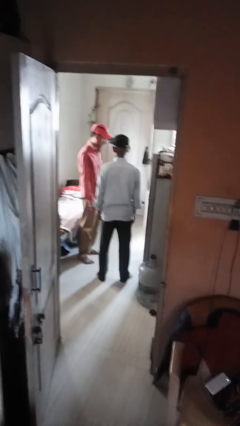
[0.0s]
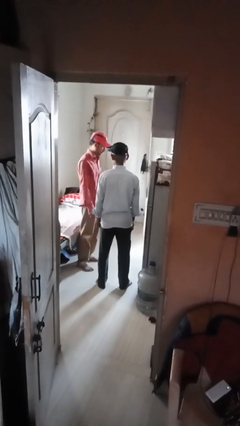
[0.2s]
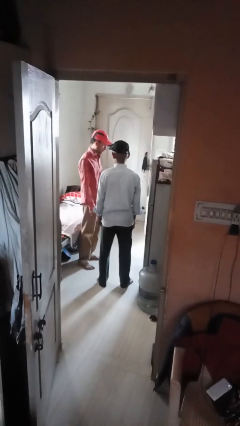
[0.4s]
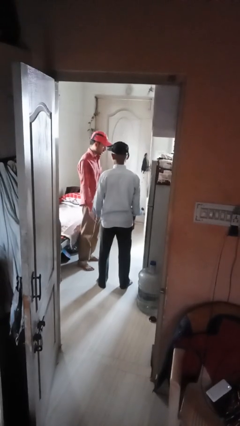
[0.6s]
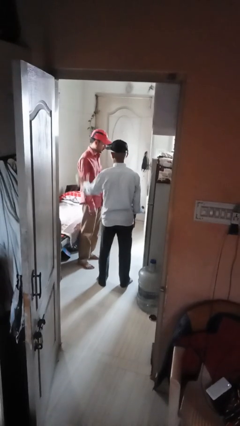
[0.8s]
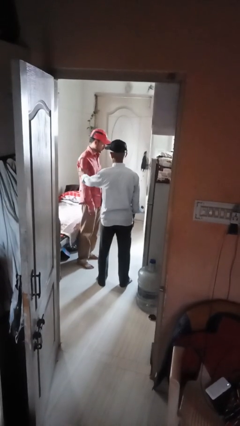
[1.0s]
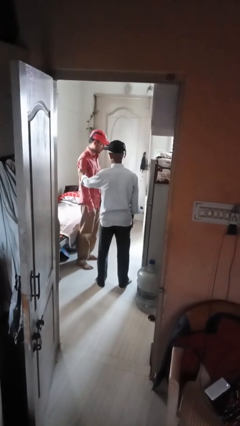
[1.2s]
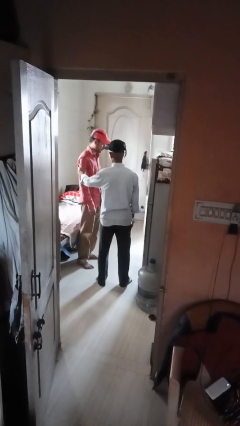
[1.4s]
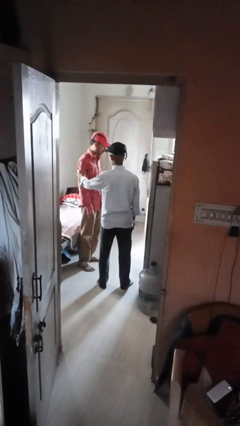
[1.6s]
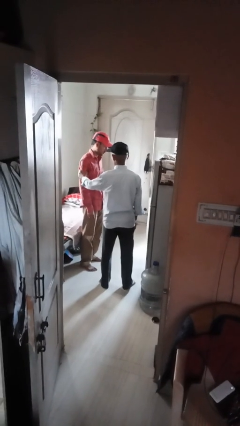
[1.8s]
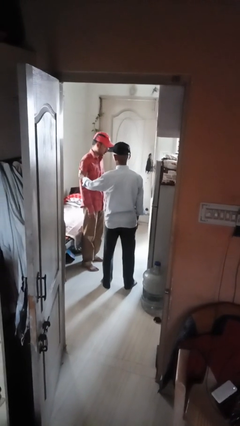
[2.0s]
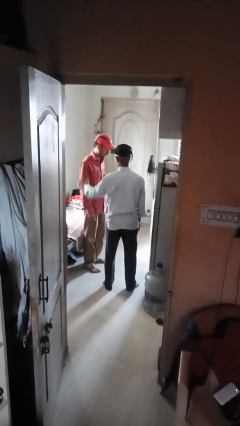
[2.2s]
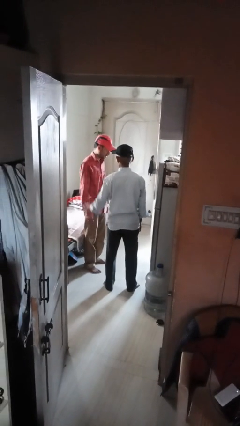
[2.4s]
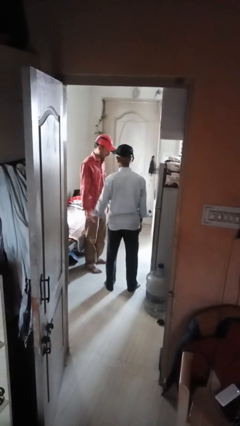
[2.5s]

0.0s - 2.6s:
person grabs person by bicep

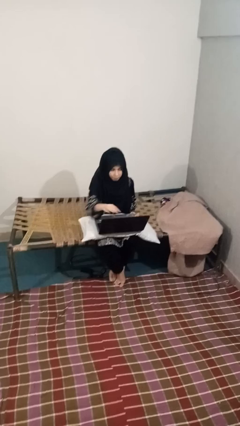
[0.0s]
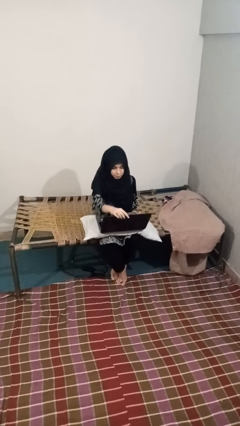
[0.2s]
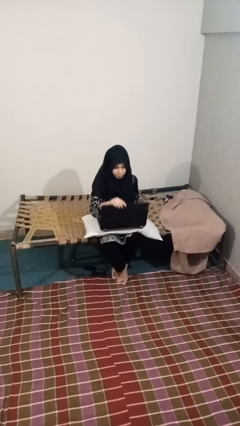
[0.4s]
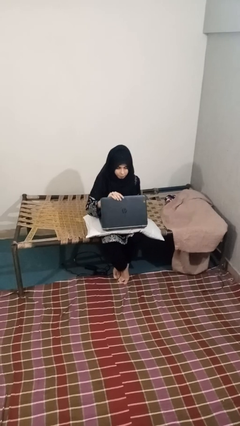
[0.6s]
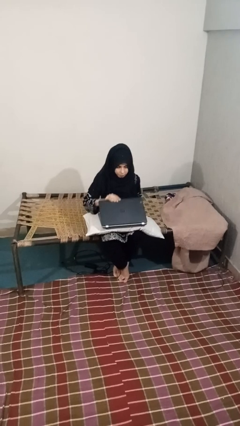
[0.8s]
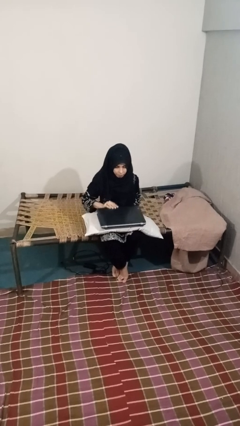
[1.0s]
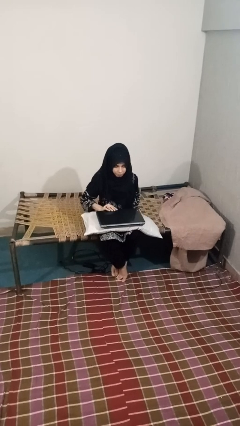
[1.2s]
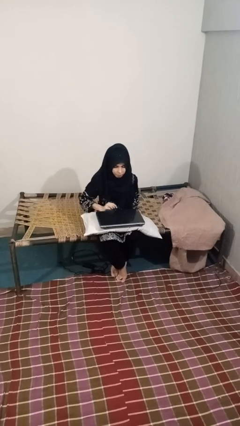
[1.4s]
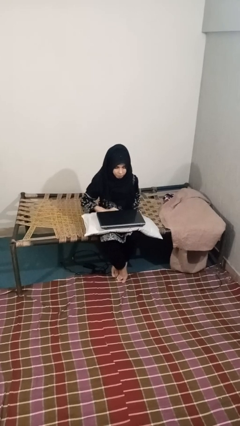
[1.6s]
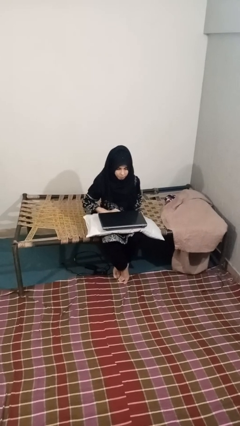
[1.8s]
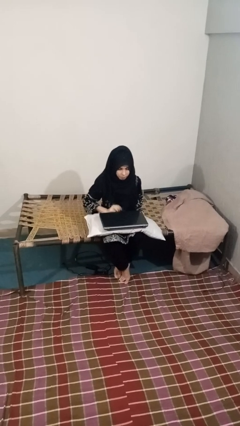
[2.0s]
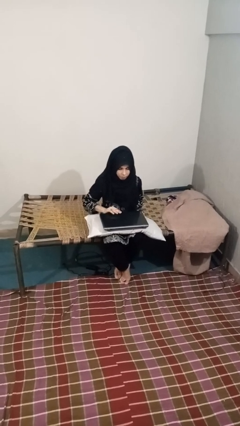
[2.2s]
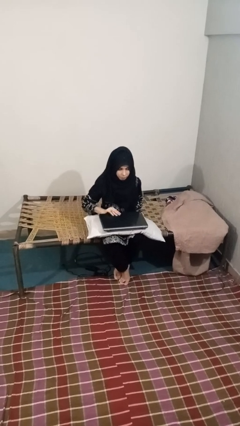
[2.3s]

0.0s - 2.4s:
person closes laptop

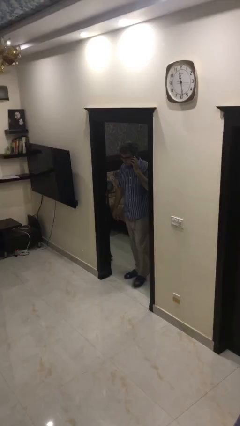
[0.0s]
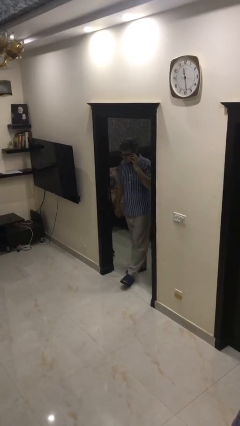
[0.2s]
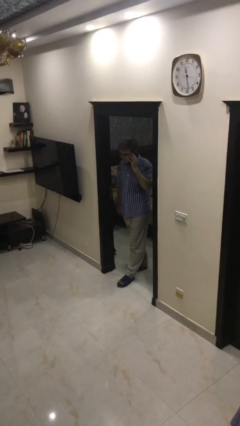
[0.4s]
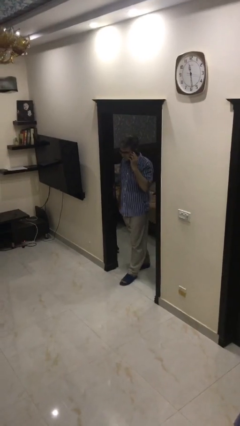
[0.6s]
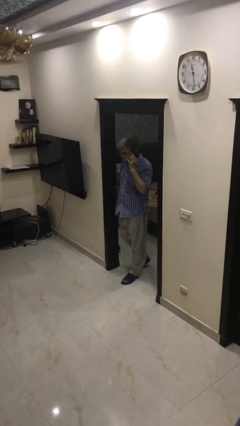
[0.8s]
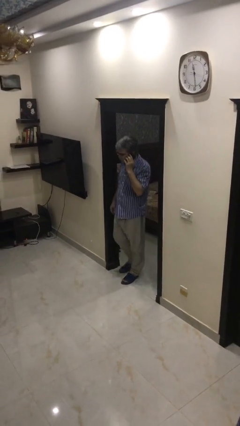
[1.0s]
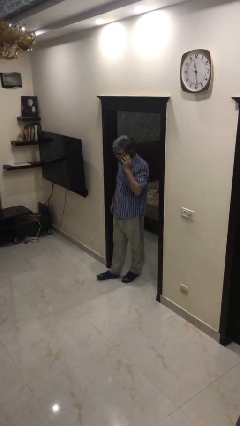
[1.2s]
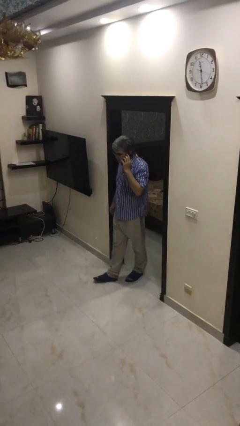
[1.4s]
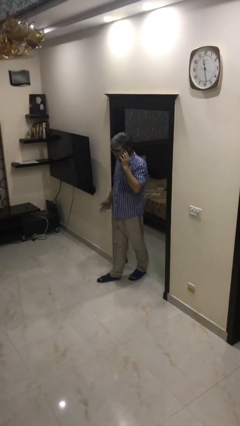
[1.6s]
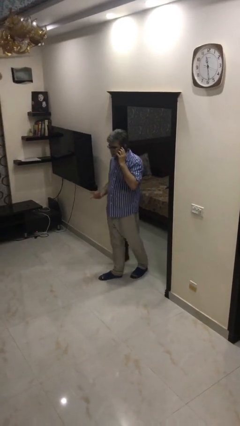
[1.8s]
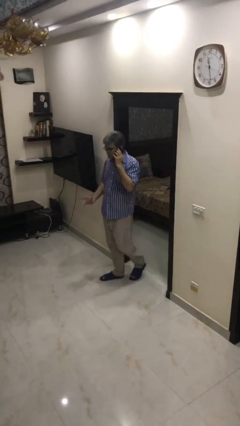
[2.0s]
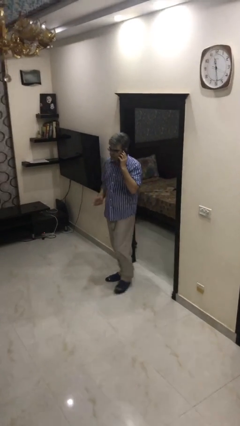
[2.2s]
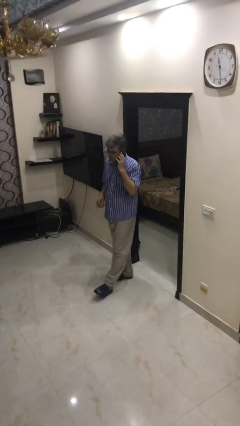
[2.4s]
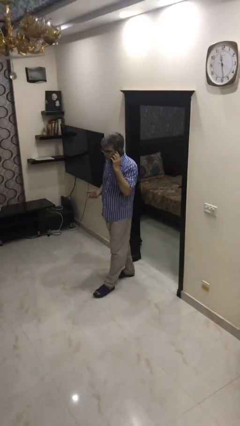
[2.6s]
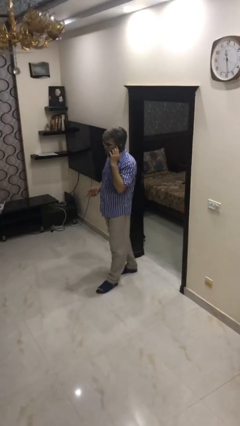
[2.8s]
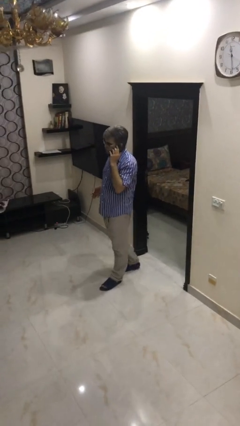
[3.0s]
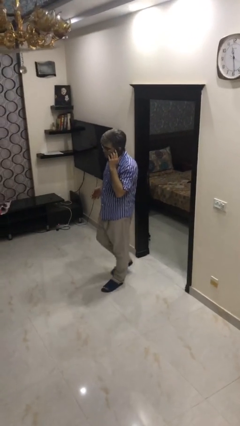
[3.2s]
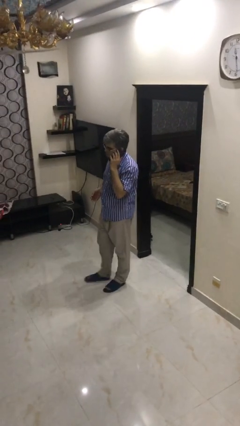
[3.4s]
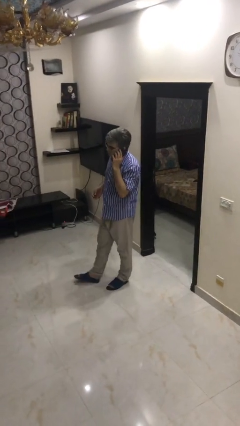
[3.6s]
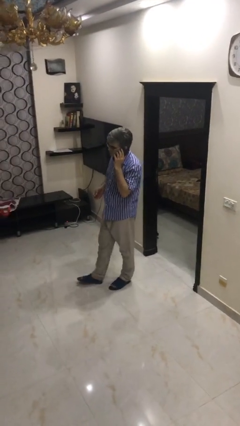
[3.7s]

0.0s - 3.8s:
person enters scene through structure

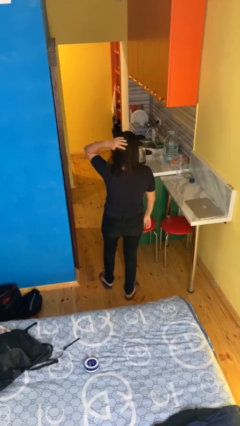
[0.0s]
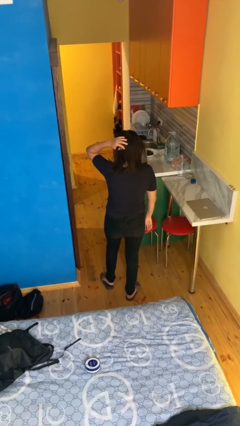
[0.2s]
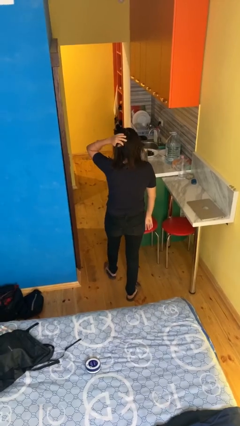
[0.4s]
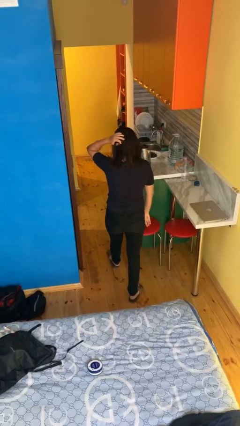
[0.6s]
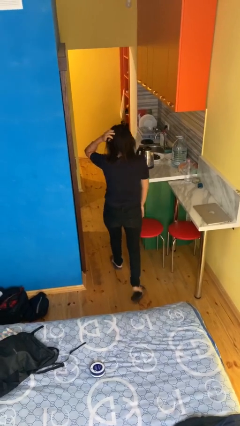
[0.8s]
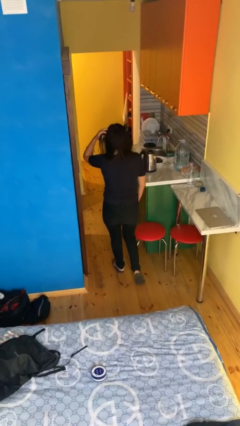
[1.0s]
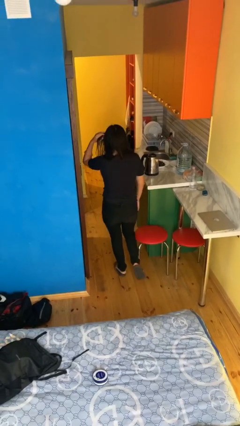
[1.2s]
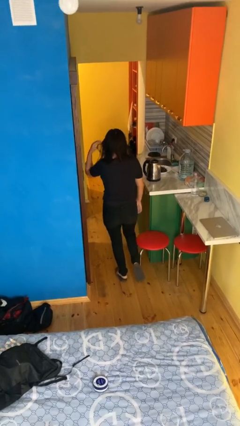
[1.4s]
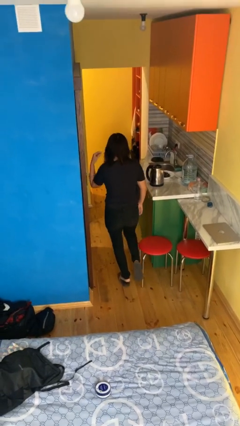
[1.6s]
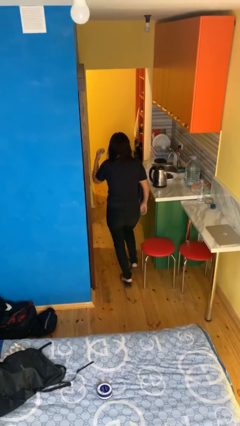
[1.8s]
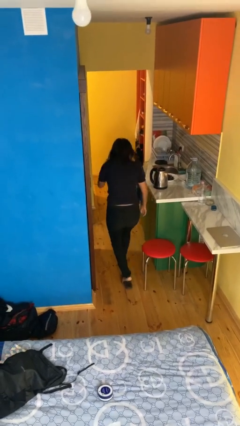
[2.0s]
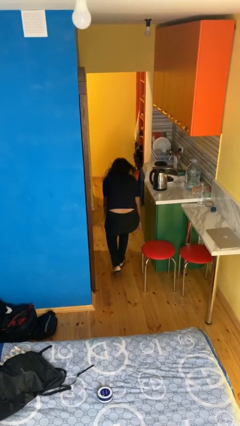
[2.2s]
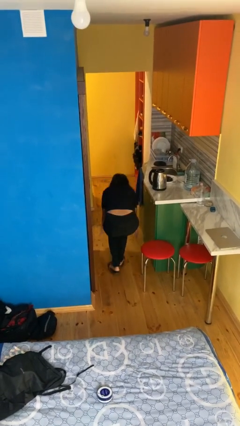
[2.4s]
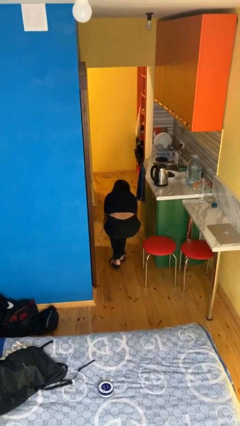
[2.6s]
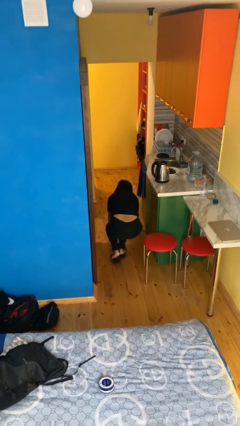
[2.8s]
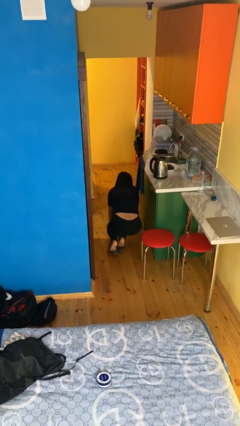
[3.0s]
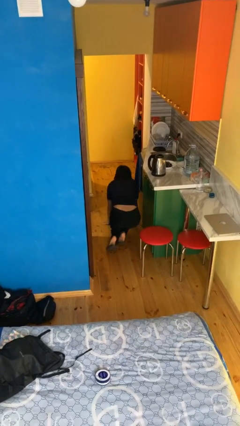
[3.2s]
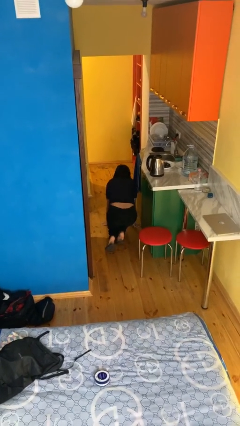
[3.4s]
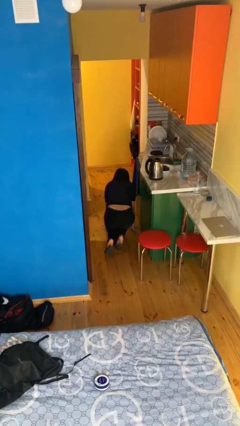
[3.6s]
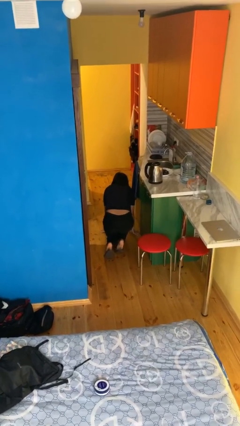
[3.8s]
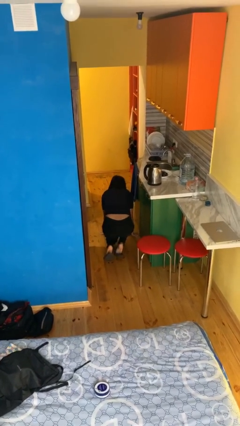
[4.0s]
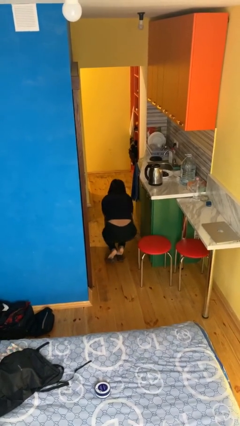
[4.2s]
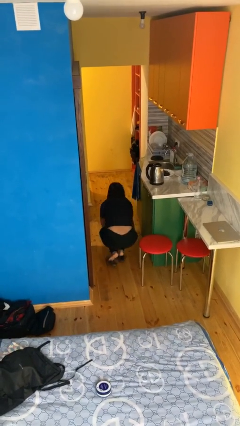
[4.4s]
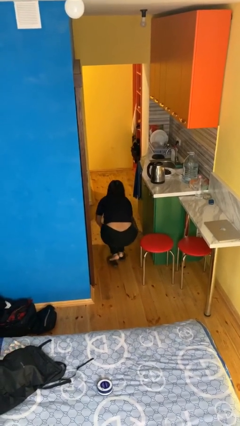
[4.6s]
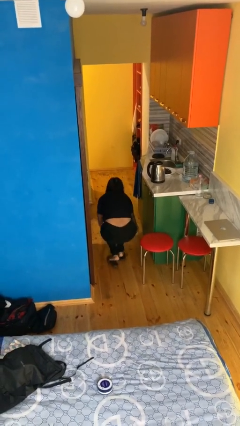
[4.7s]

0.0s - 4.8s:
person trips on object on floor

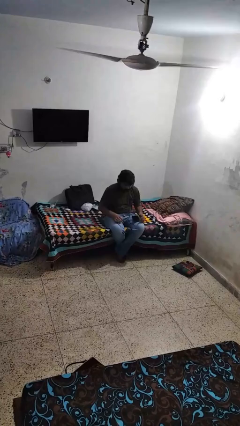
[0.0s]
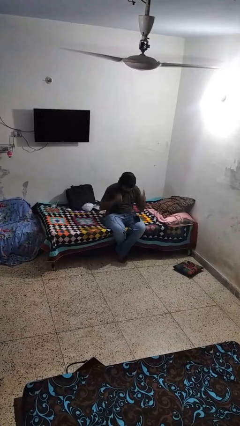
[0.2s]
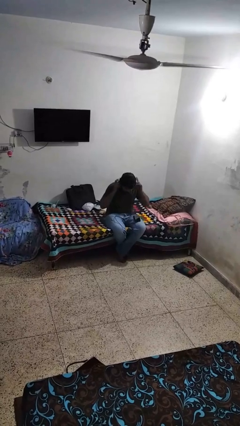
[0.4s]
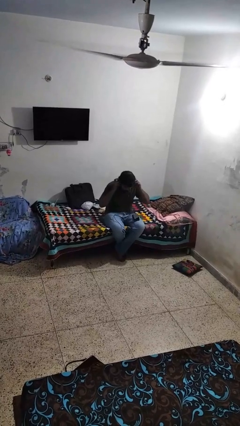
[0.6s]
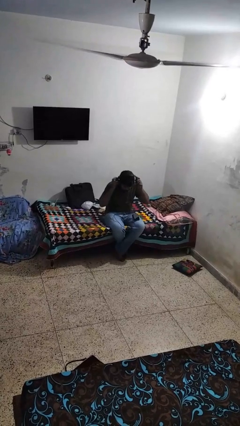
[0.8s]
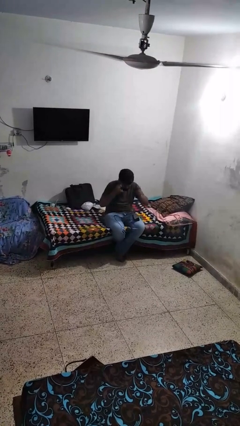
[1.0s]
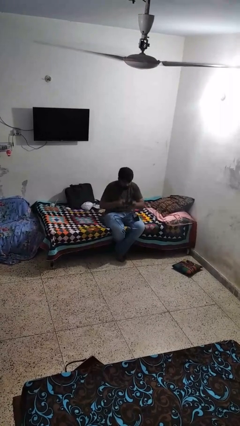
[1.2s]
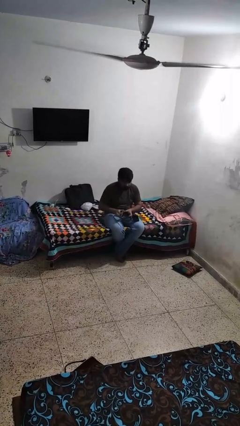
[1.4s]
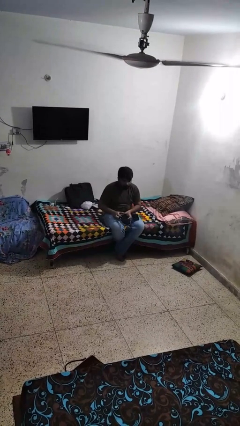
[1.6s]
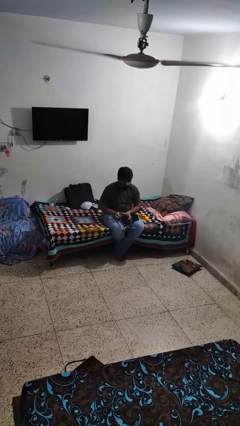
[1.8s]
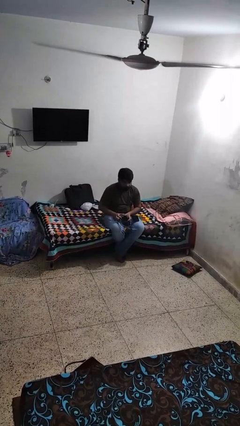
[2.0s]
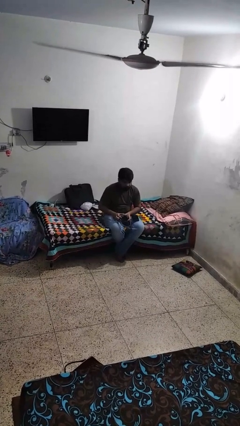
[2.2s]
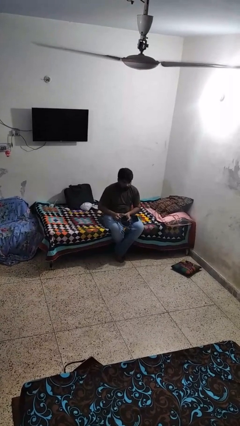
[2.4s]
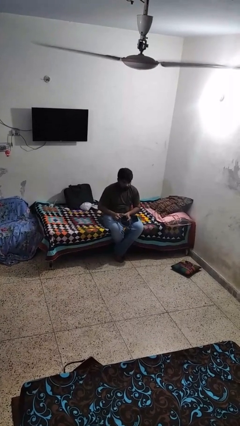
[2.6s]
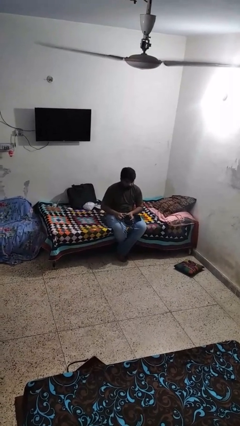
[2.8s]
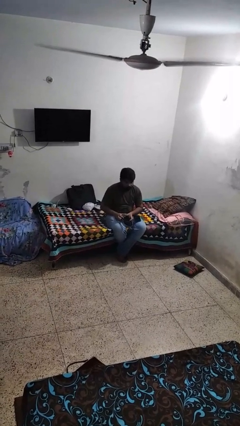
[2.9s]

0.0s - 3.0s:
person takes off headphones

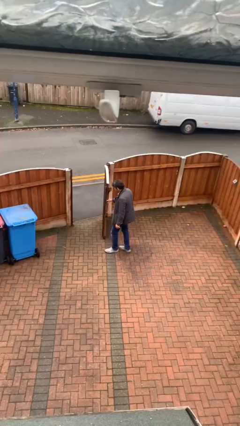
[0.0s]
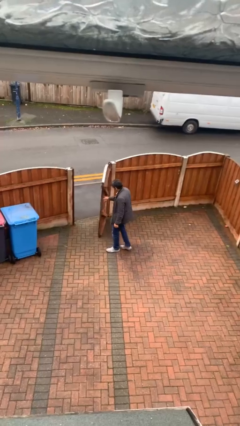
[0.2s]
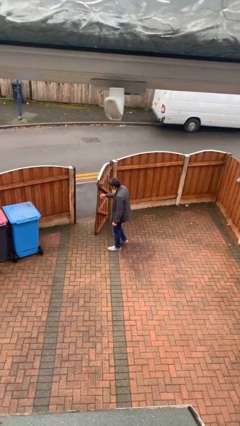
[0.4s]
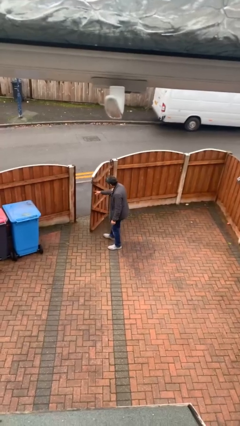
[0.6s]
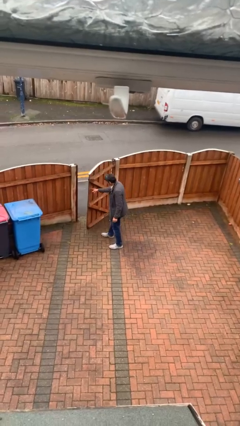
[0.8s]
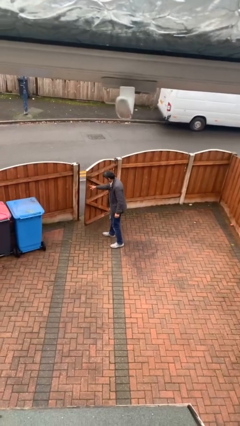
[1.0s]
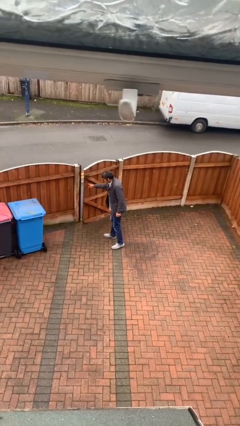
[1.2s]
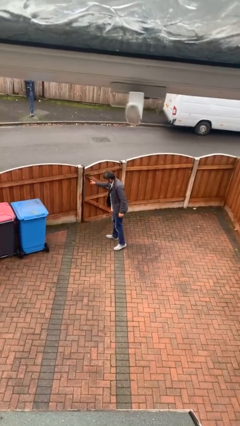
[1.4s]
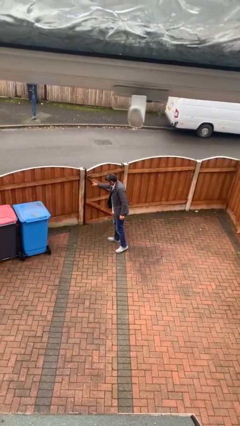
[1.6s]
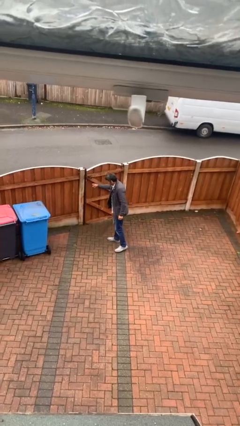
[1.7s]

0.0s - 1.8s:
person closes facility door
